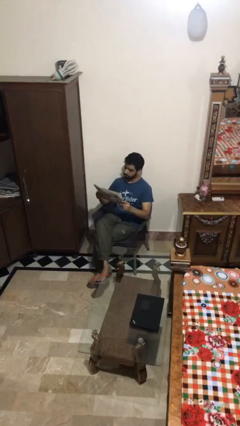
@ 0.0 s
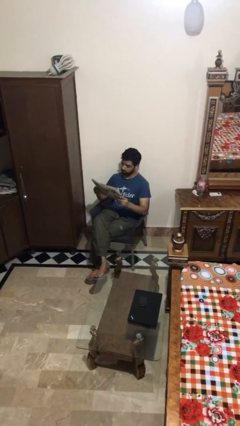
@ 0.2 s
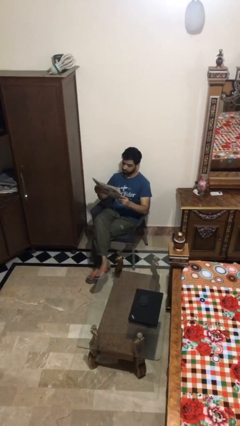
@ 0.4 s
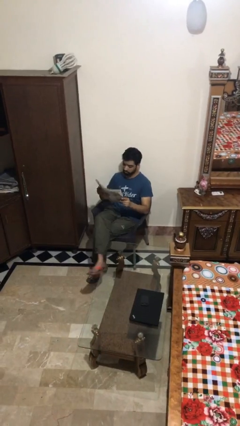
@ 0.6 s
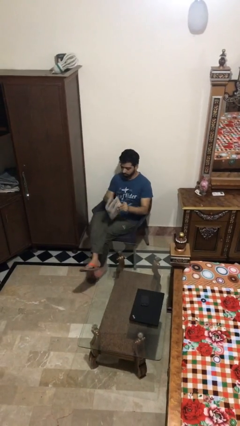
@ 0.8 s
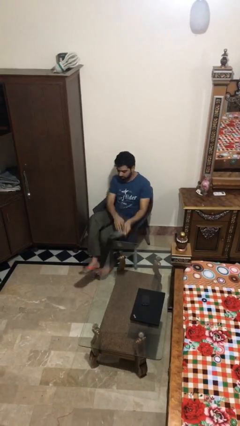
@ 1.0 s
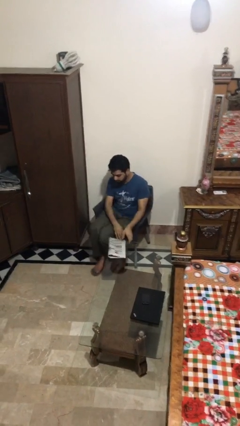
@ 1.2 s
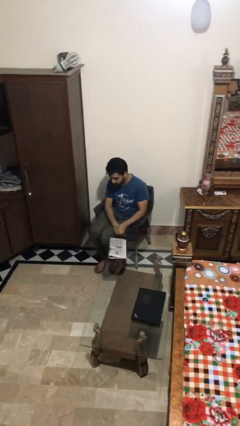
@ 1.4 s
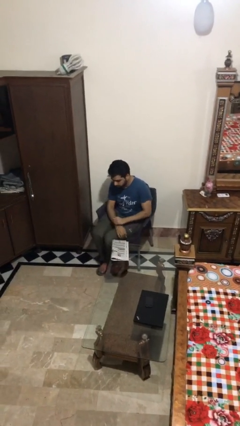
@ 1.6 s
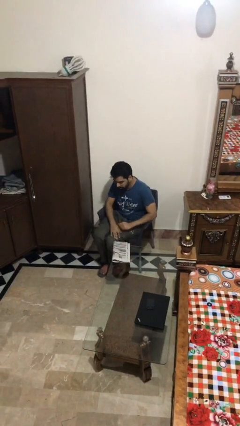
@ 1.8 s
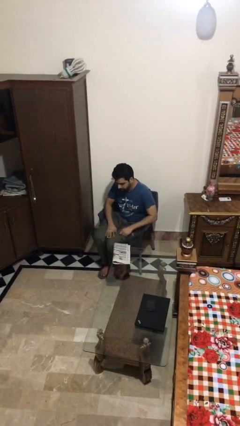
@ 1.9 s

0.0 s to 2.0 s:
person puts down object on table

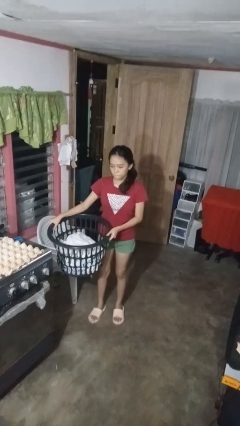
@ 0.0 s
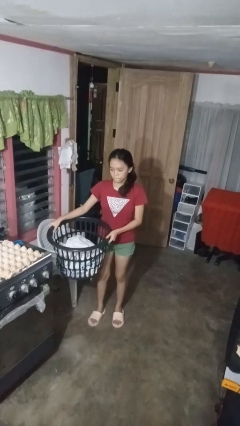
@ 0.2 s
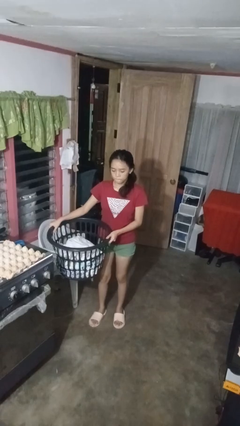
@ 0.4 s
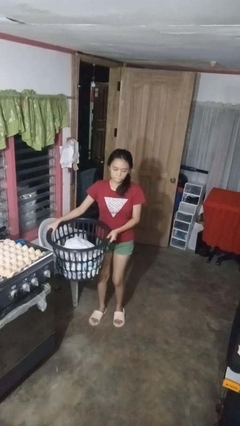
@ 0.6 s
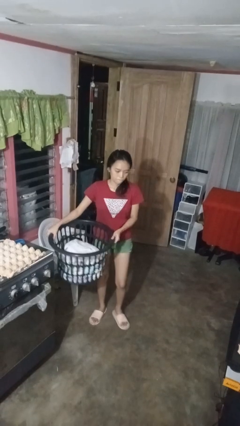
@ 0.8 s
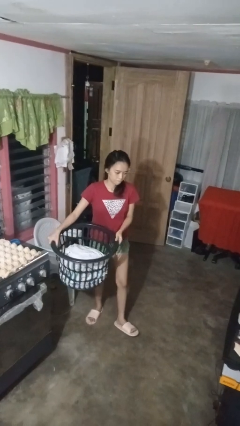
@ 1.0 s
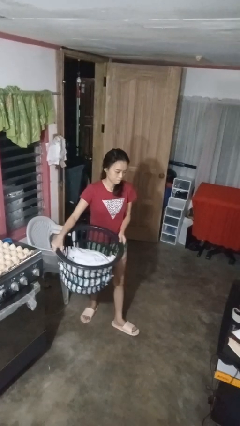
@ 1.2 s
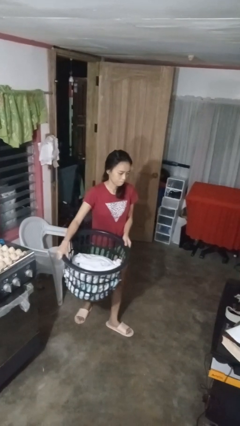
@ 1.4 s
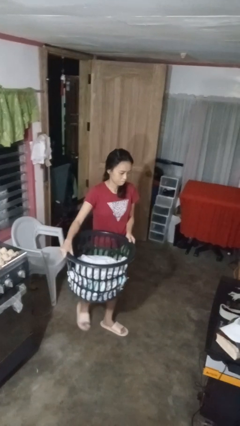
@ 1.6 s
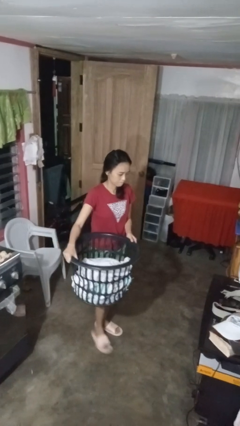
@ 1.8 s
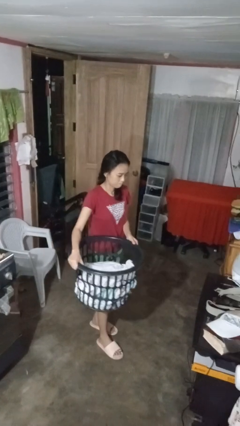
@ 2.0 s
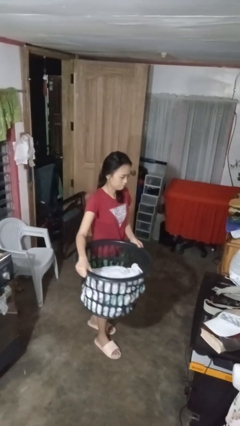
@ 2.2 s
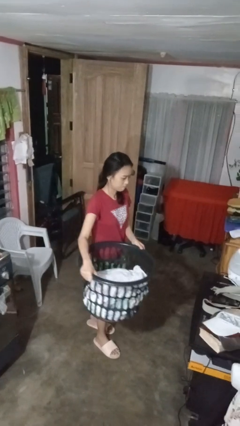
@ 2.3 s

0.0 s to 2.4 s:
person carries laundry basket

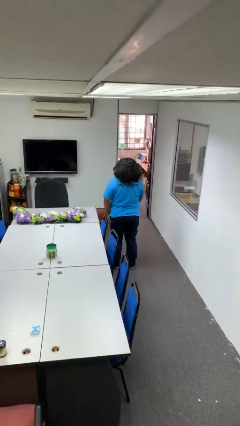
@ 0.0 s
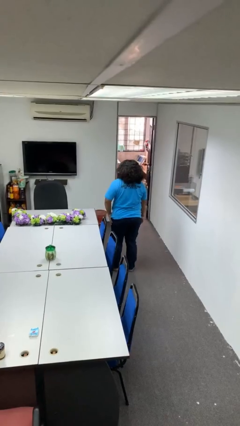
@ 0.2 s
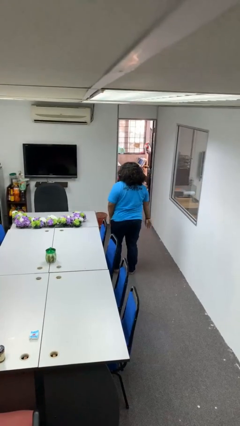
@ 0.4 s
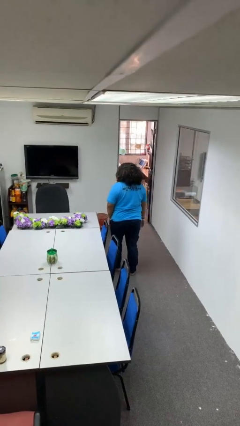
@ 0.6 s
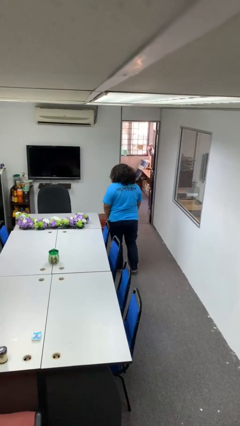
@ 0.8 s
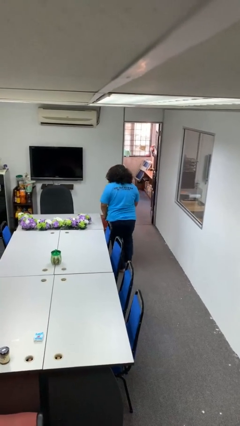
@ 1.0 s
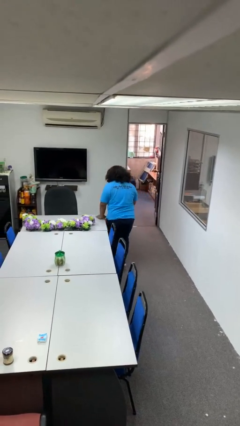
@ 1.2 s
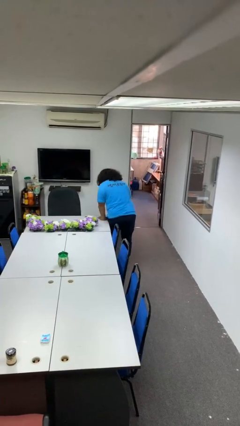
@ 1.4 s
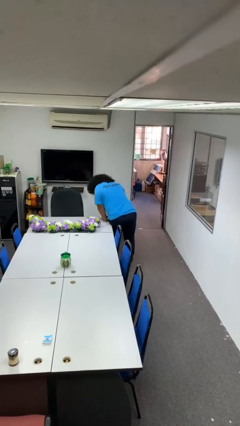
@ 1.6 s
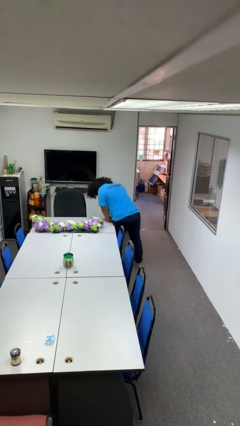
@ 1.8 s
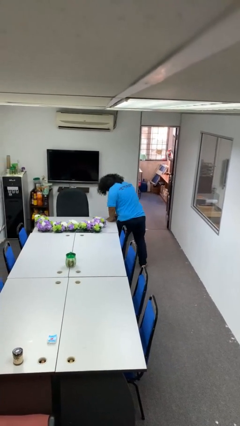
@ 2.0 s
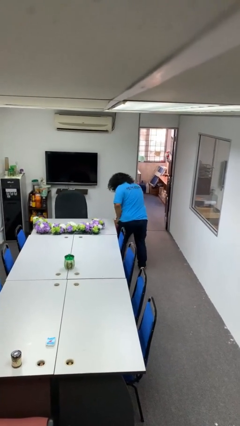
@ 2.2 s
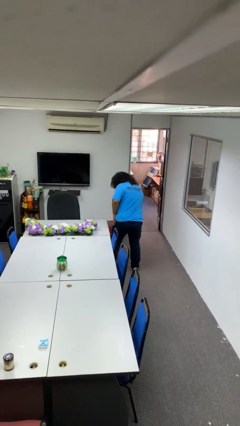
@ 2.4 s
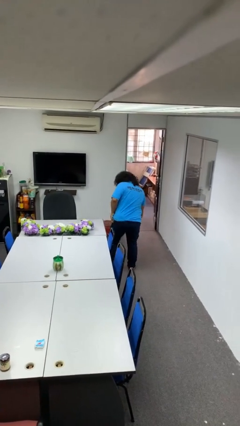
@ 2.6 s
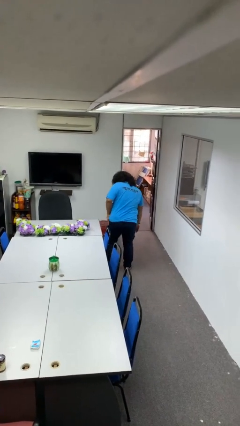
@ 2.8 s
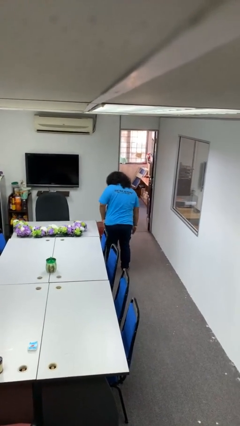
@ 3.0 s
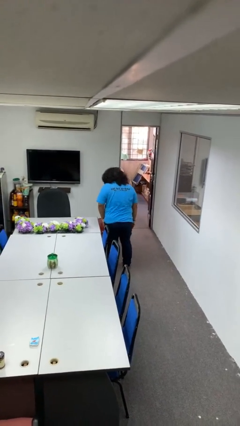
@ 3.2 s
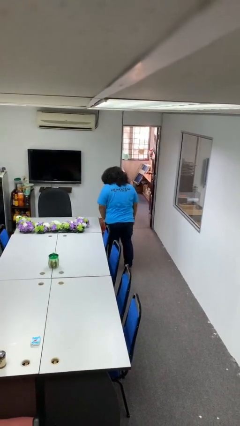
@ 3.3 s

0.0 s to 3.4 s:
person bumps into table

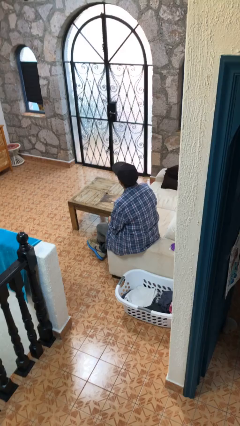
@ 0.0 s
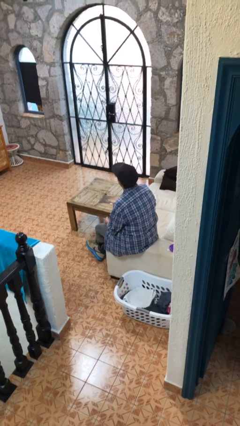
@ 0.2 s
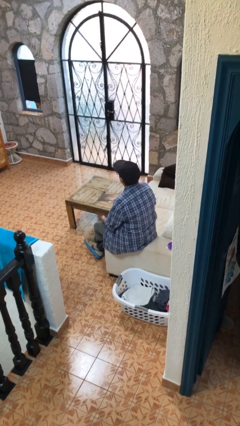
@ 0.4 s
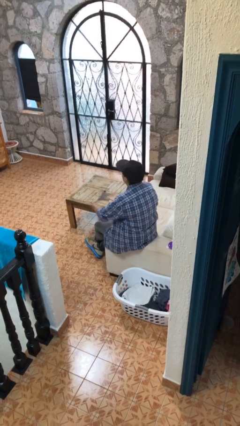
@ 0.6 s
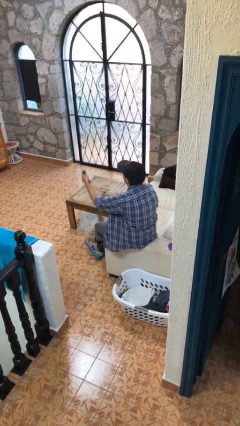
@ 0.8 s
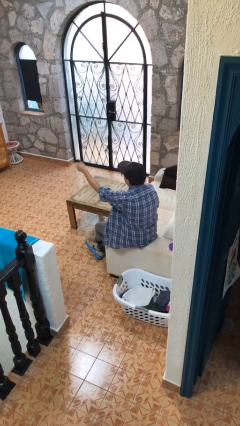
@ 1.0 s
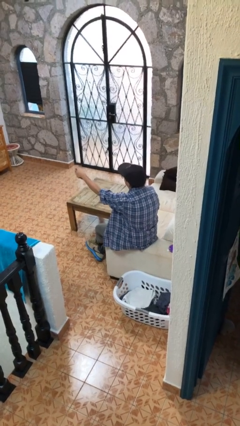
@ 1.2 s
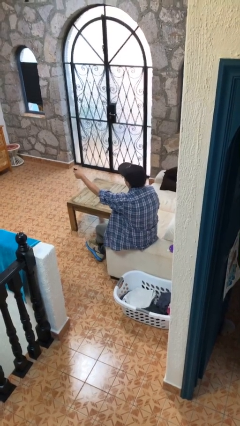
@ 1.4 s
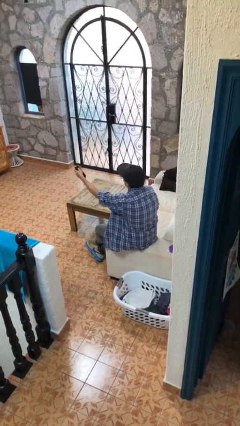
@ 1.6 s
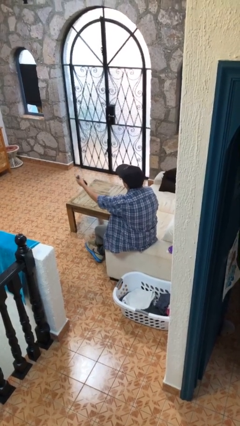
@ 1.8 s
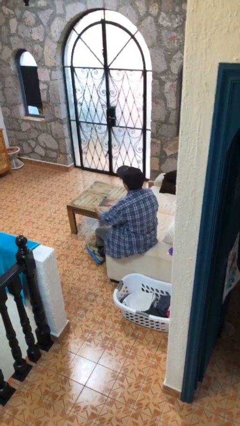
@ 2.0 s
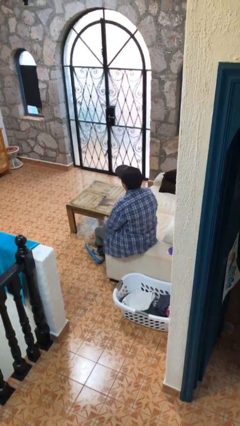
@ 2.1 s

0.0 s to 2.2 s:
person uses television remote

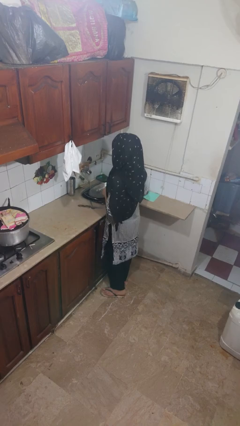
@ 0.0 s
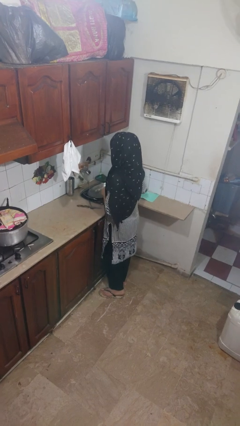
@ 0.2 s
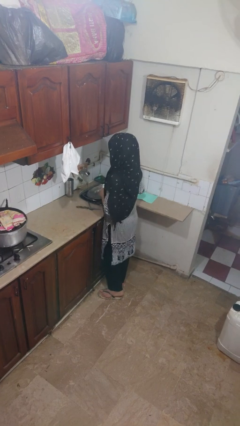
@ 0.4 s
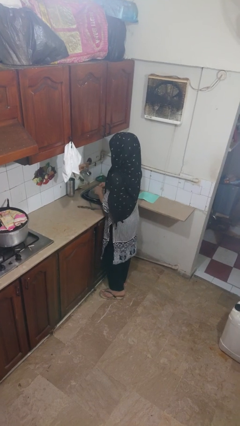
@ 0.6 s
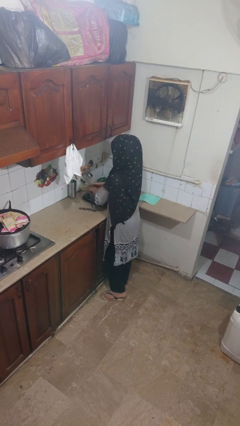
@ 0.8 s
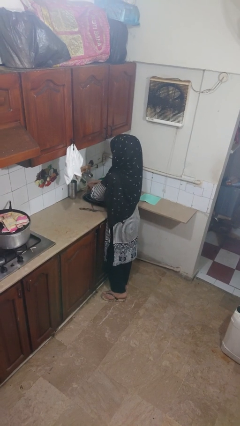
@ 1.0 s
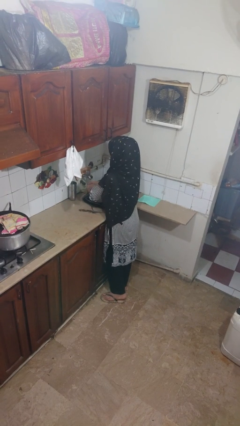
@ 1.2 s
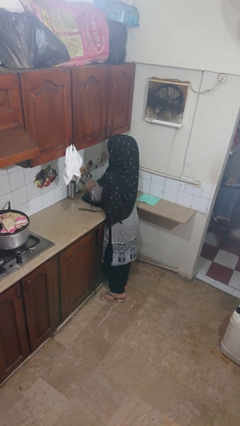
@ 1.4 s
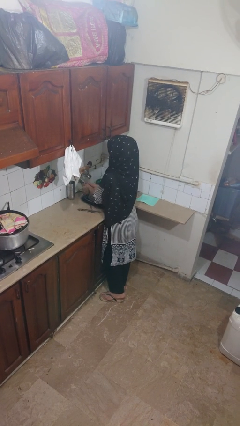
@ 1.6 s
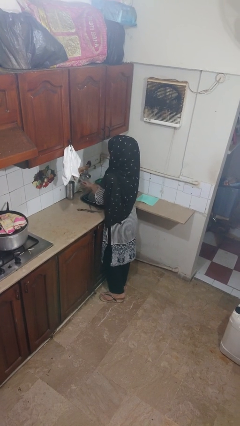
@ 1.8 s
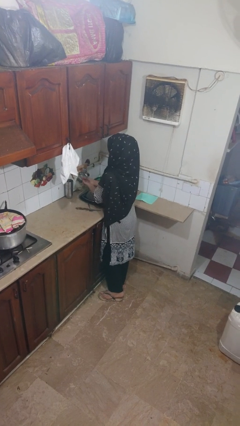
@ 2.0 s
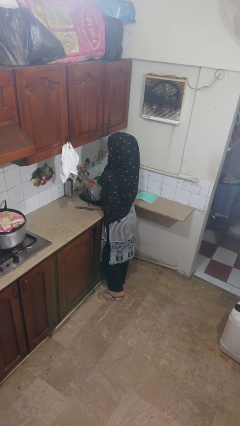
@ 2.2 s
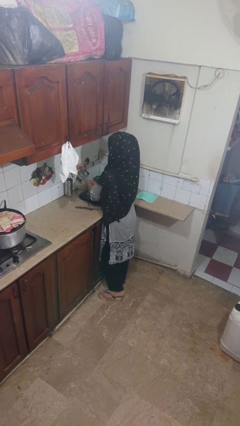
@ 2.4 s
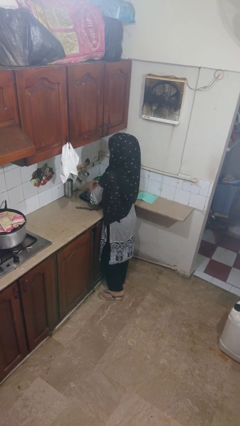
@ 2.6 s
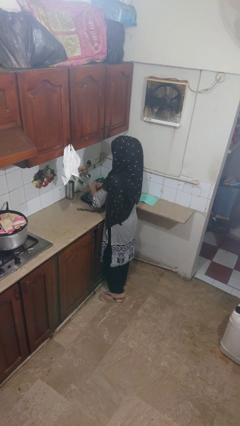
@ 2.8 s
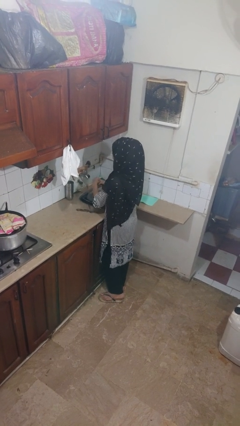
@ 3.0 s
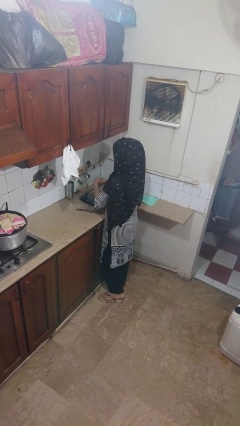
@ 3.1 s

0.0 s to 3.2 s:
person washes hands

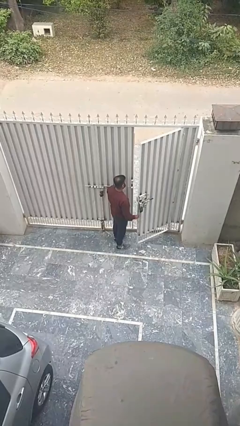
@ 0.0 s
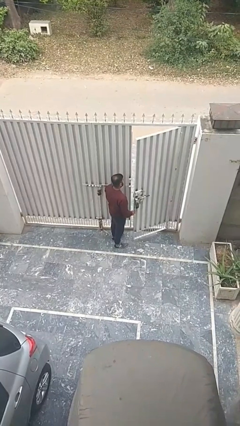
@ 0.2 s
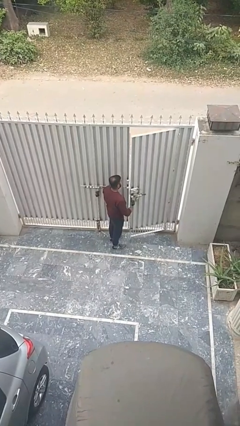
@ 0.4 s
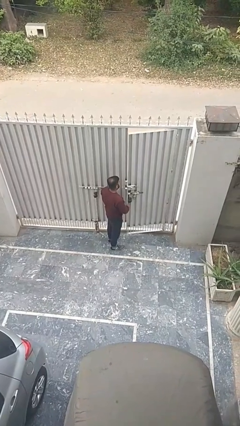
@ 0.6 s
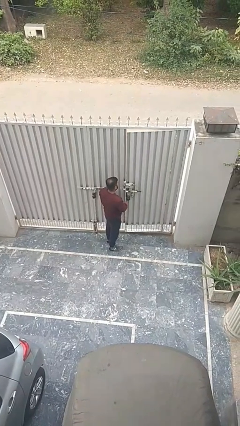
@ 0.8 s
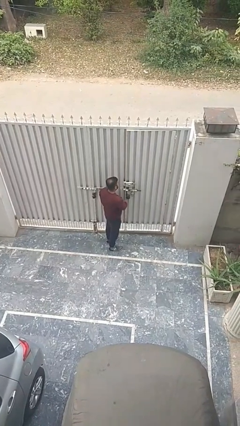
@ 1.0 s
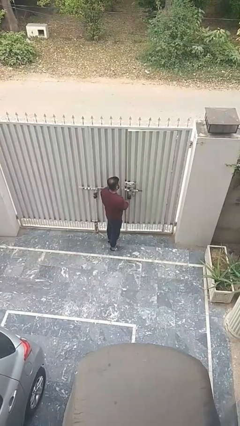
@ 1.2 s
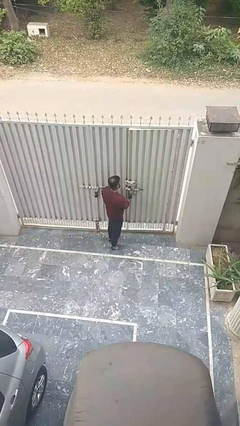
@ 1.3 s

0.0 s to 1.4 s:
person closes facility door

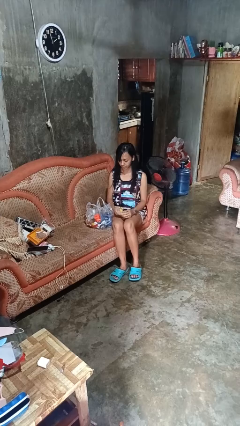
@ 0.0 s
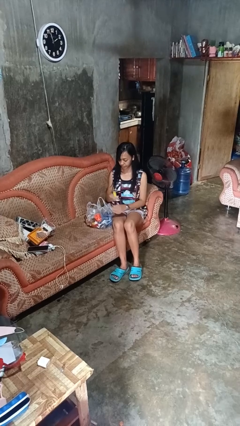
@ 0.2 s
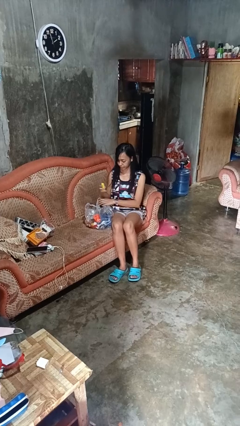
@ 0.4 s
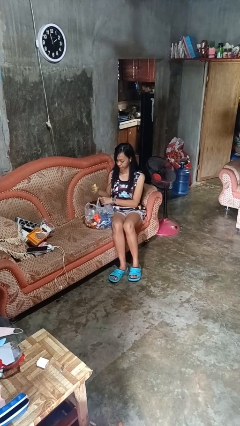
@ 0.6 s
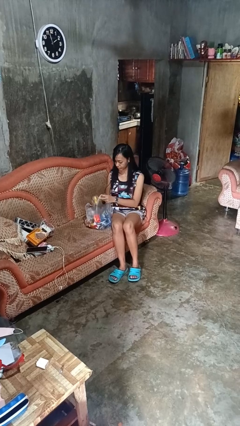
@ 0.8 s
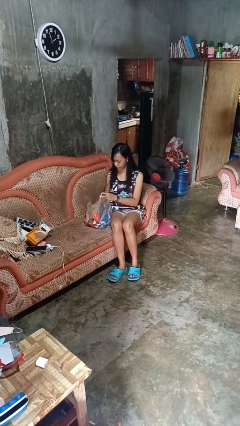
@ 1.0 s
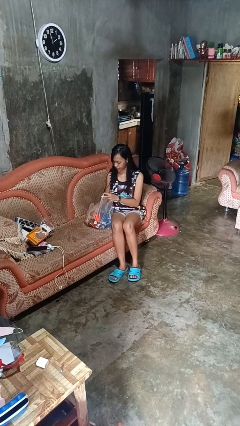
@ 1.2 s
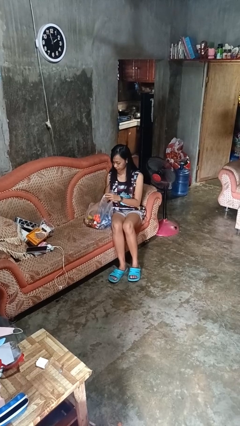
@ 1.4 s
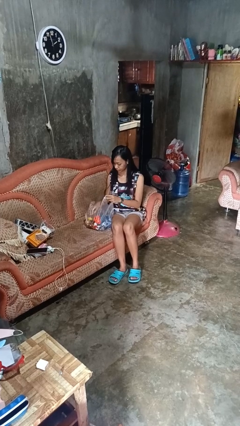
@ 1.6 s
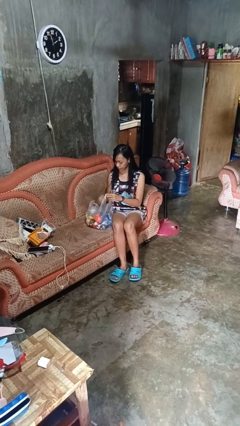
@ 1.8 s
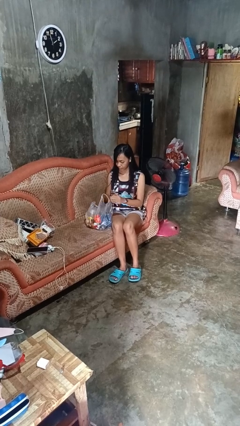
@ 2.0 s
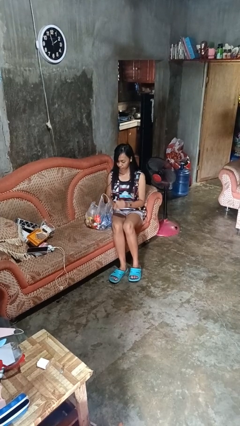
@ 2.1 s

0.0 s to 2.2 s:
person puts object into bag
